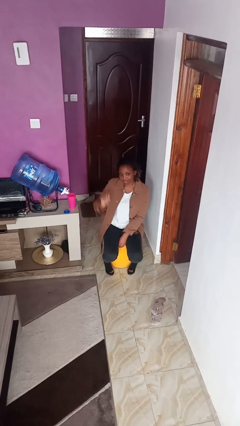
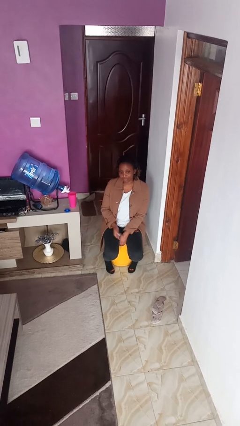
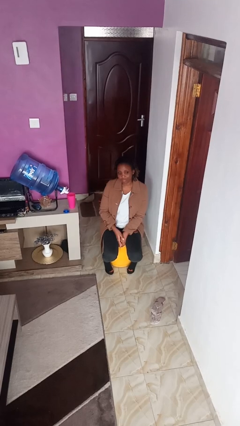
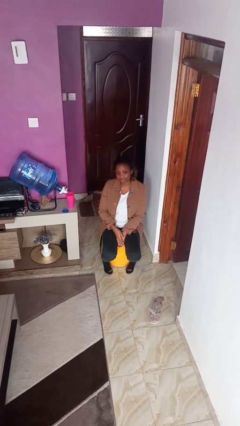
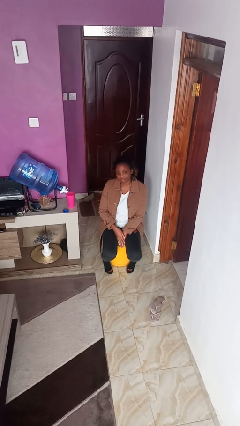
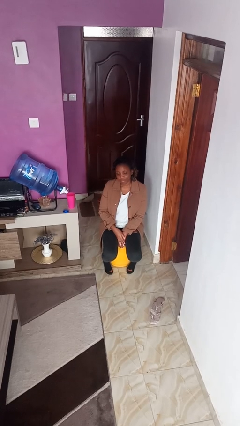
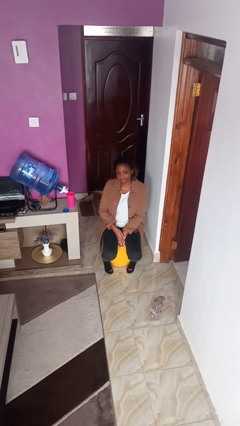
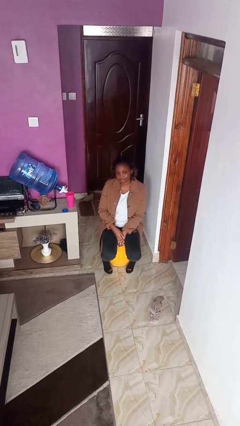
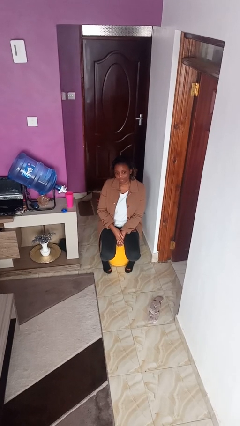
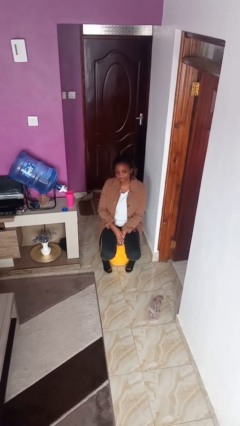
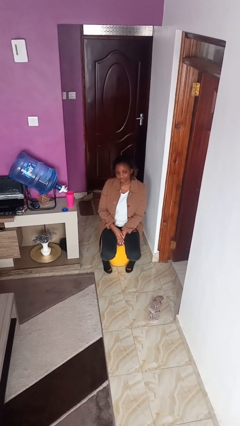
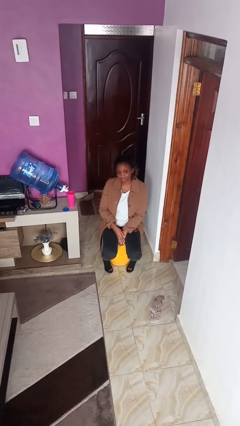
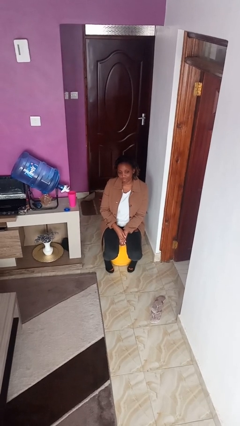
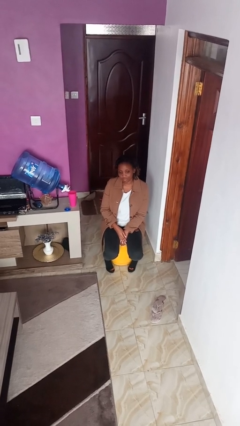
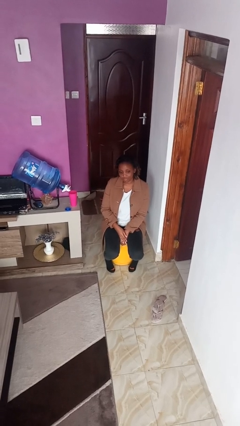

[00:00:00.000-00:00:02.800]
person gestures lower hand

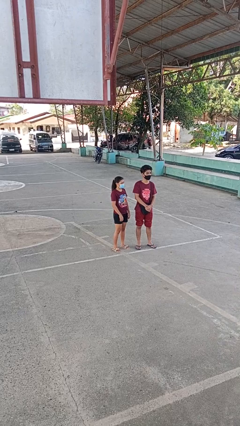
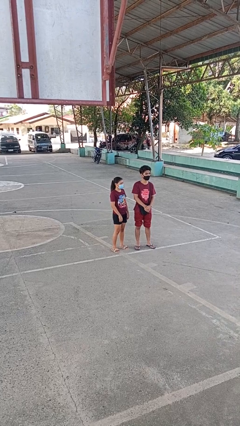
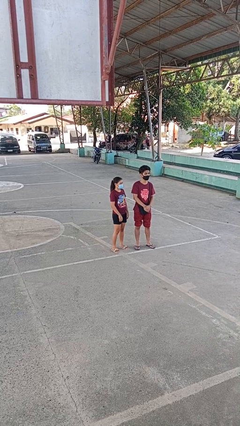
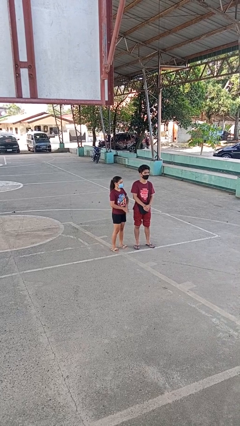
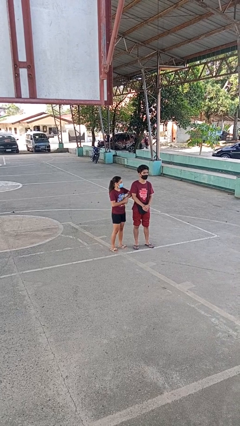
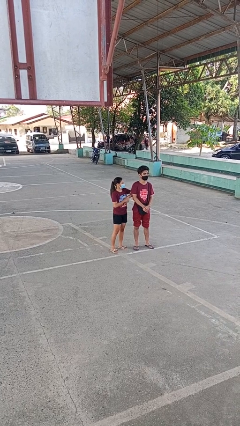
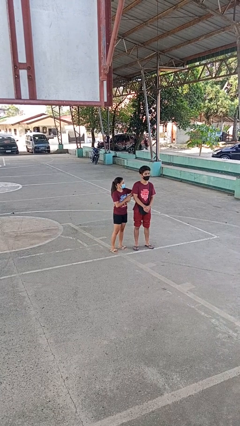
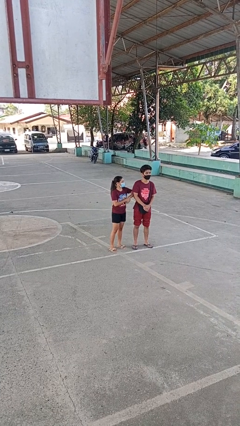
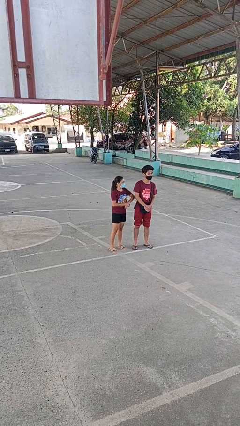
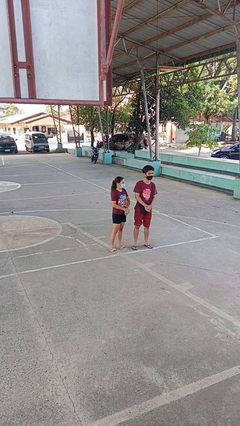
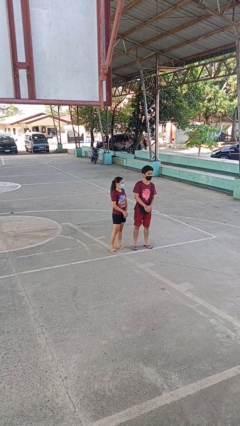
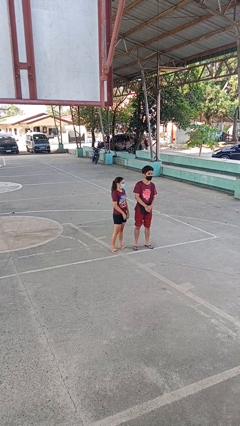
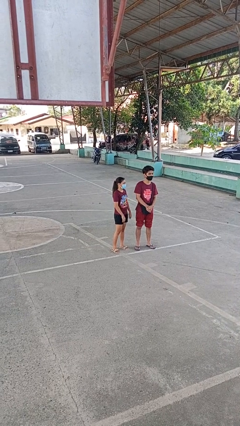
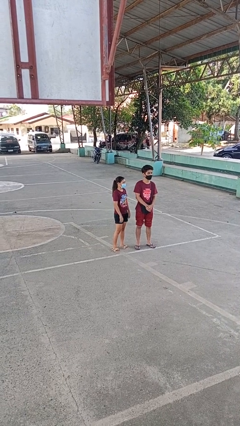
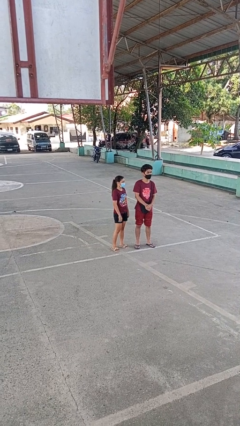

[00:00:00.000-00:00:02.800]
person nudges person with elbow

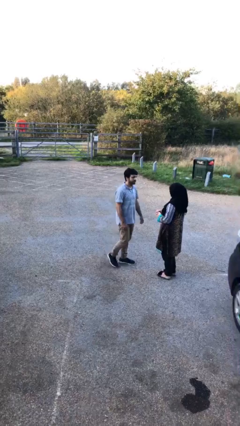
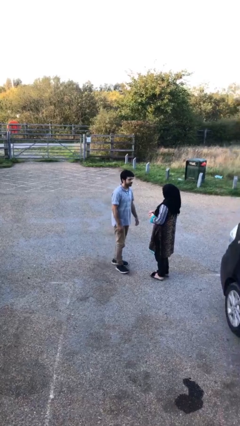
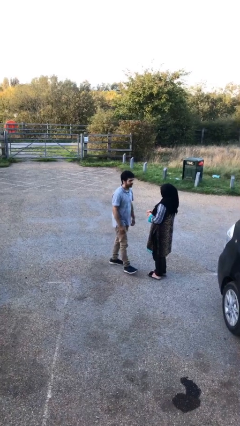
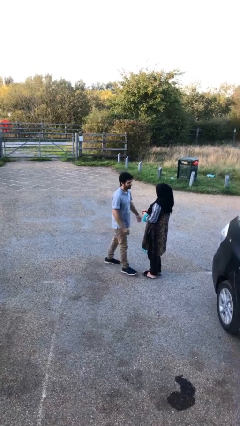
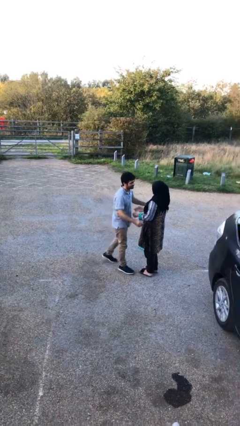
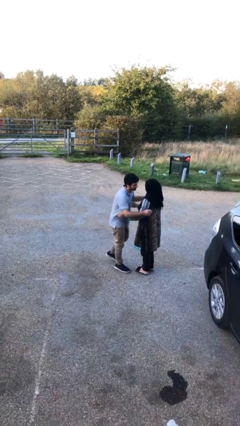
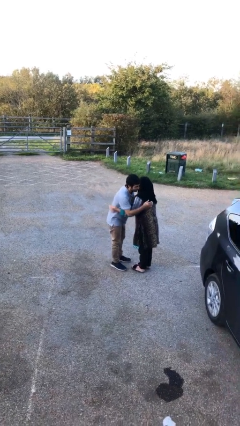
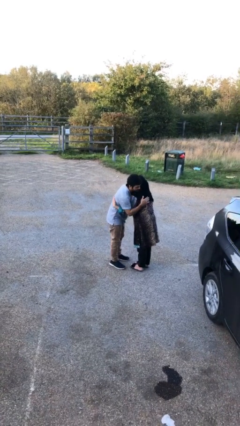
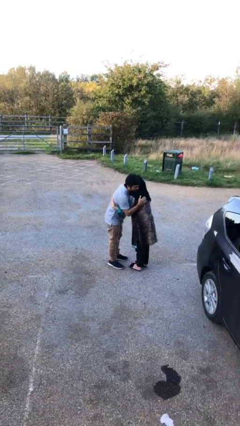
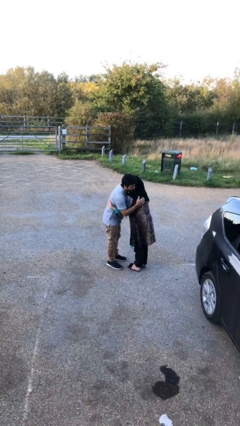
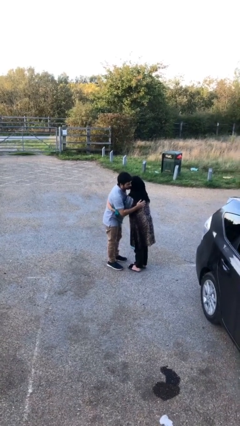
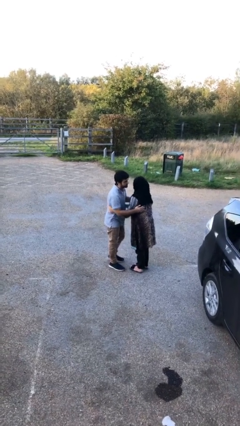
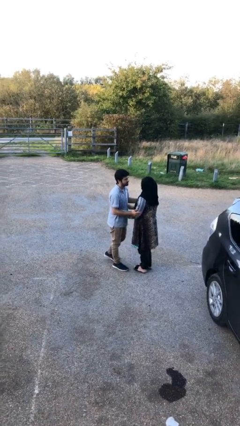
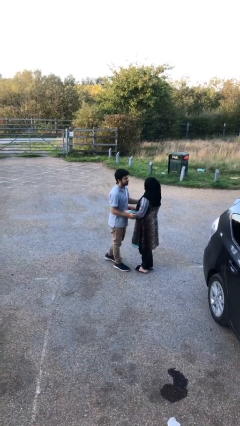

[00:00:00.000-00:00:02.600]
person embraces person

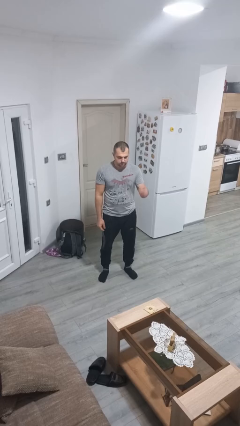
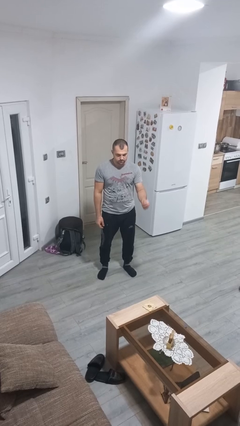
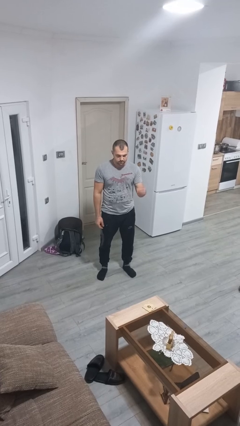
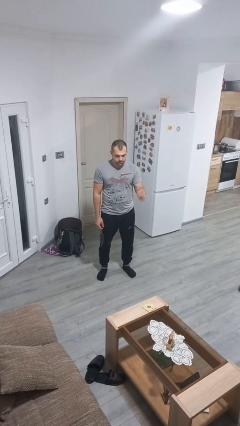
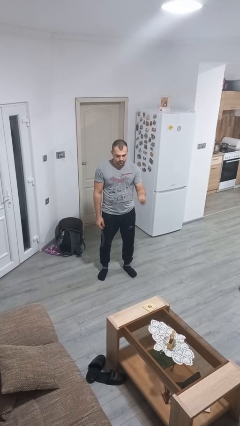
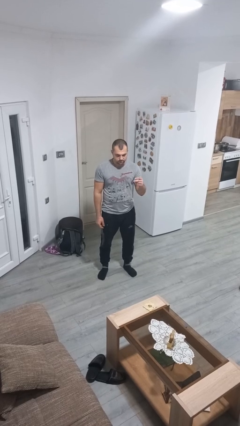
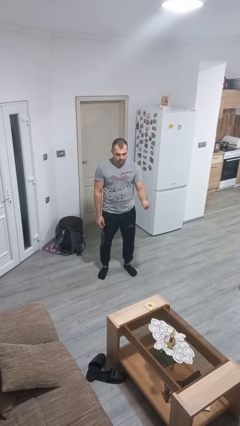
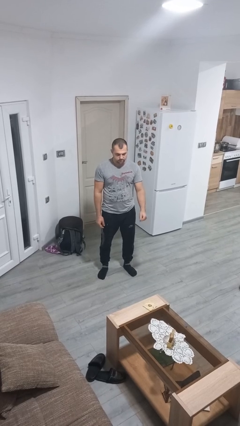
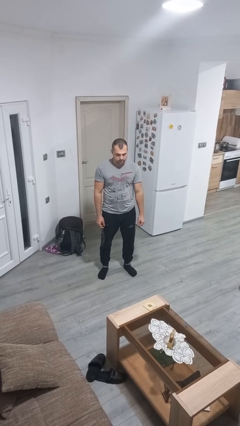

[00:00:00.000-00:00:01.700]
person snaps fingers

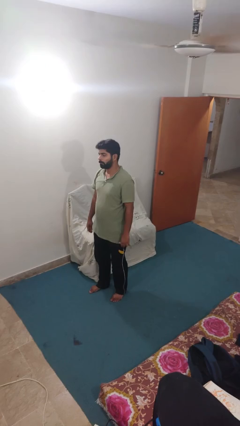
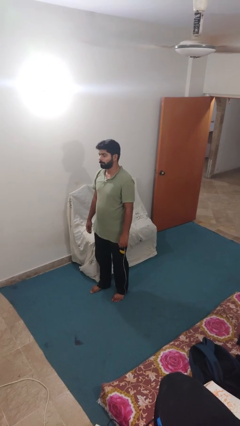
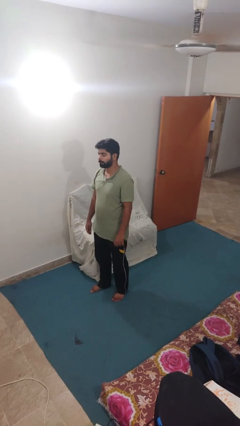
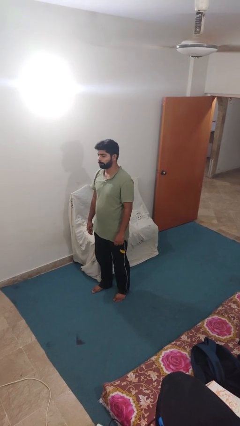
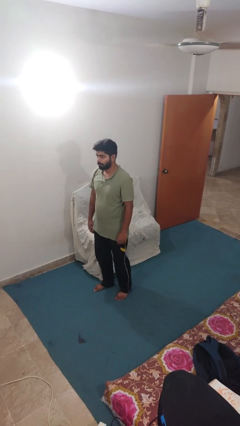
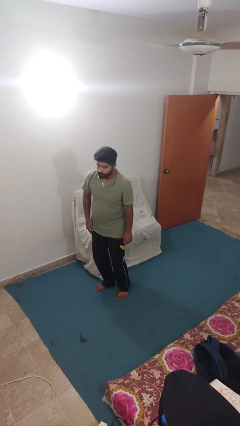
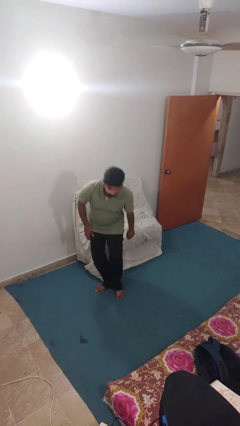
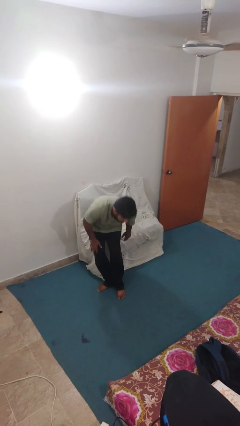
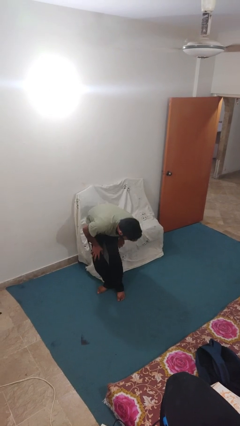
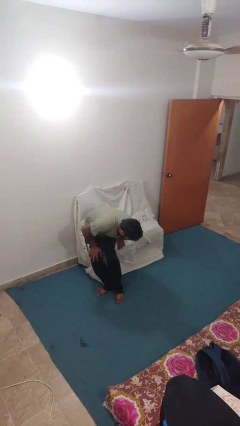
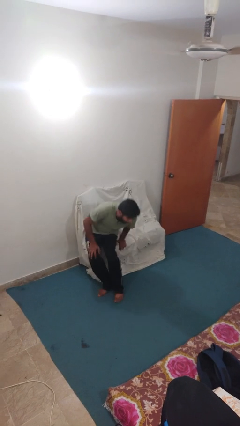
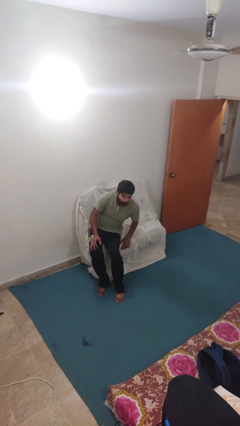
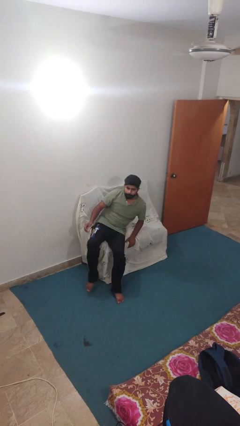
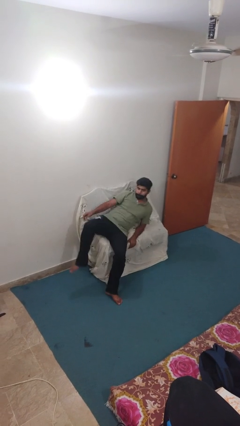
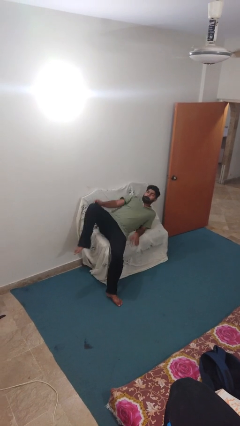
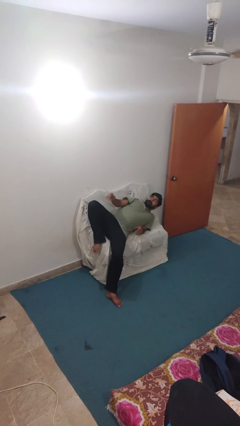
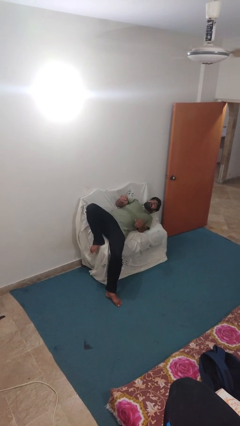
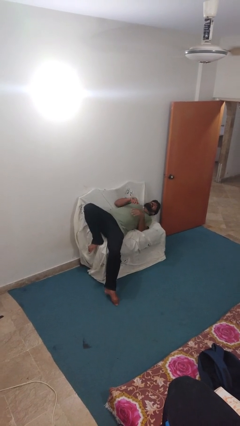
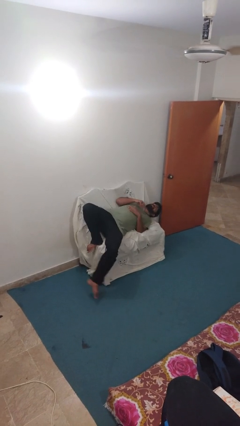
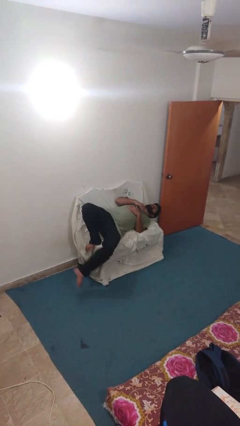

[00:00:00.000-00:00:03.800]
person lies down on couch

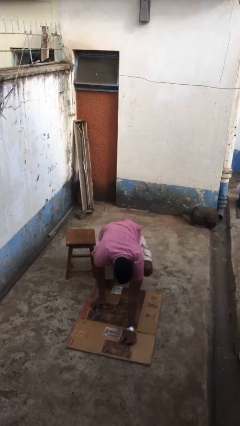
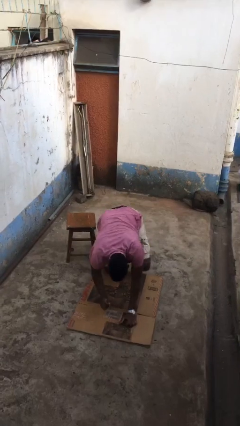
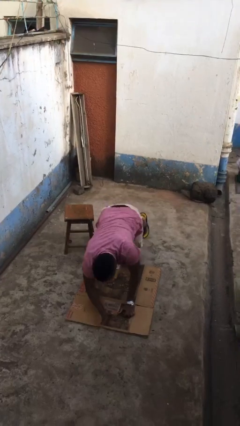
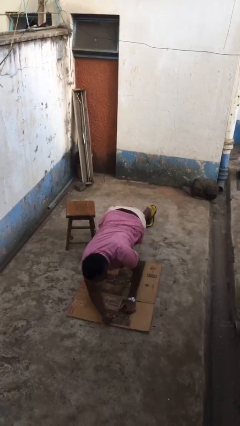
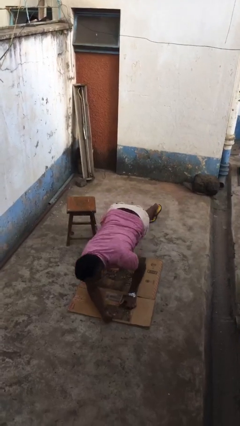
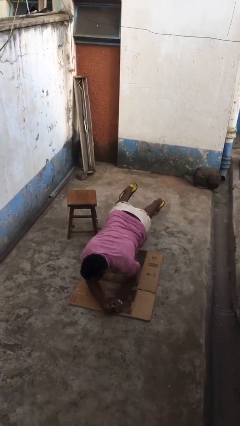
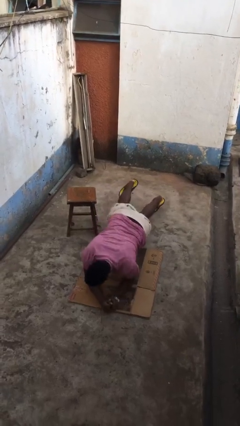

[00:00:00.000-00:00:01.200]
person trips on object on floor

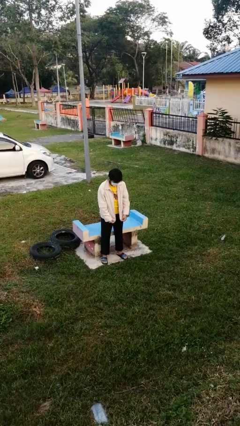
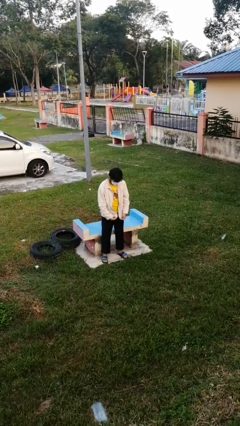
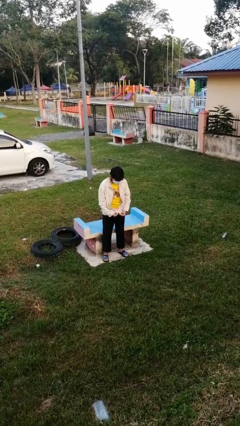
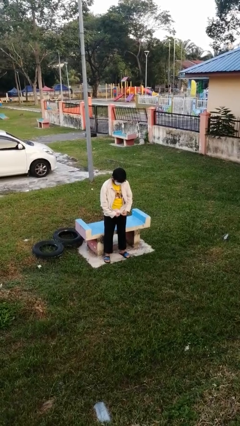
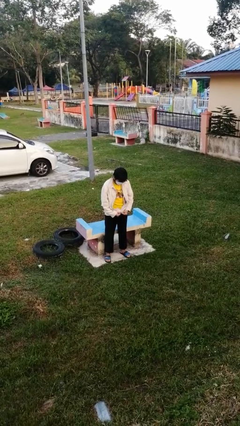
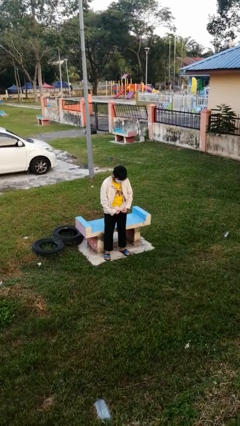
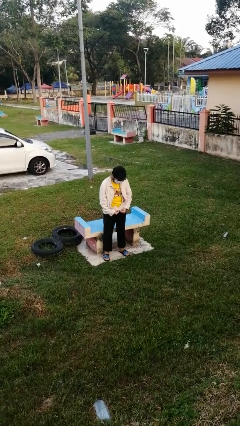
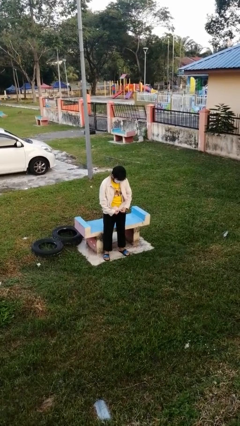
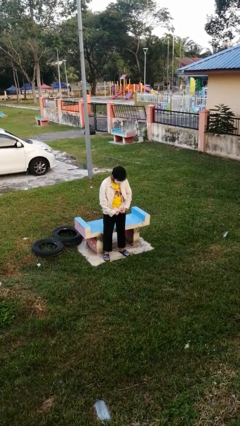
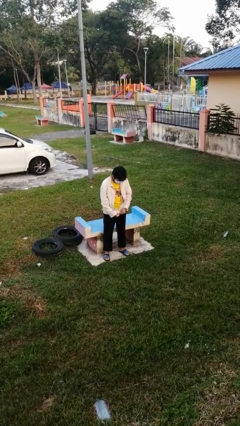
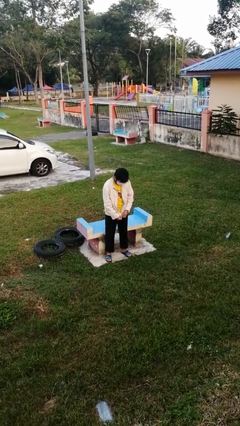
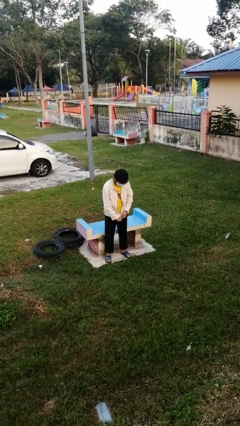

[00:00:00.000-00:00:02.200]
person zips up jacket
